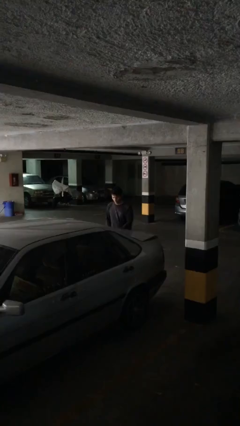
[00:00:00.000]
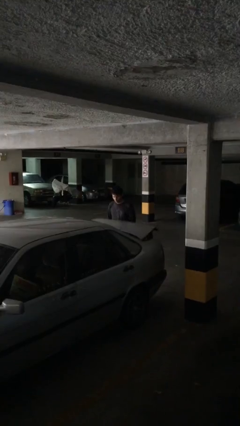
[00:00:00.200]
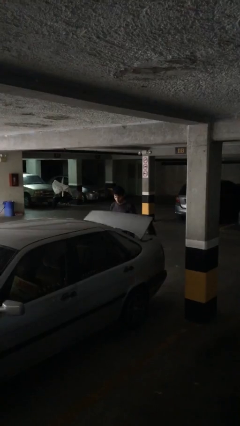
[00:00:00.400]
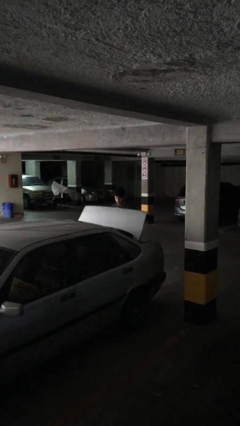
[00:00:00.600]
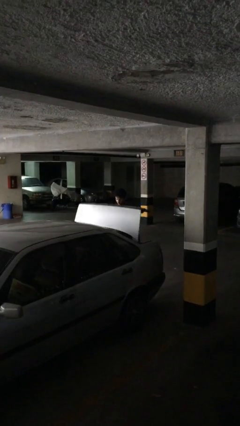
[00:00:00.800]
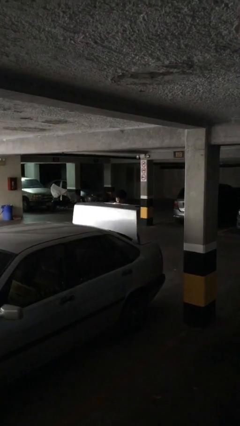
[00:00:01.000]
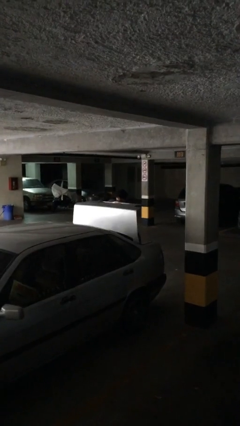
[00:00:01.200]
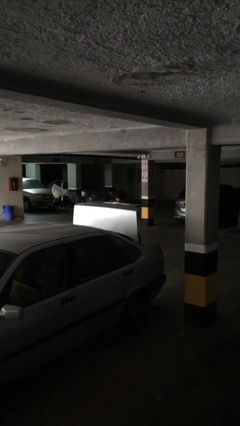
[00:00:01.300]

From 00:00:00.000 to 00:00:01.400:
person opens car trunk

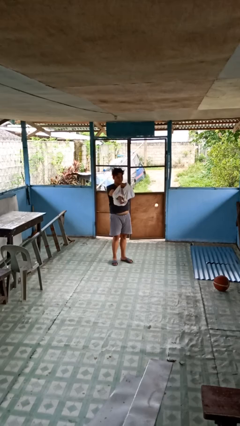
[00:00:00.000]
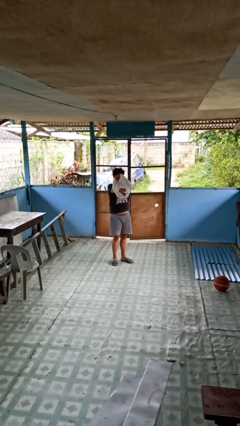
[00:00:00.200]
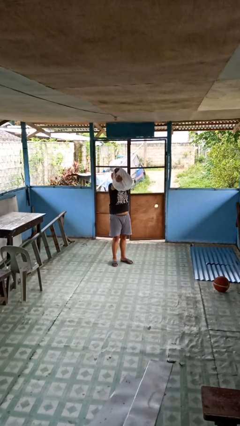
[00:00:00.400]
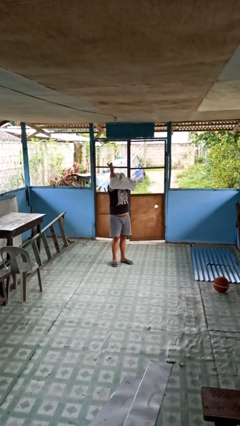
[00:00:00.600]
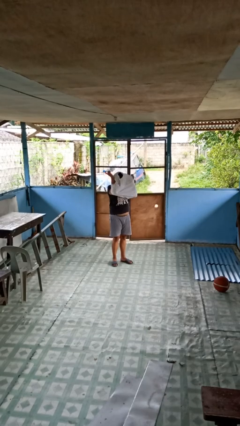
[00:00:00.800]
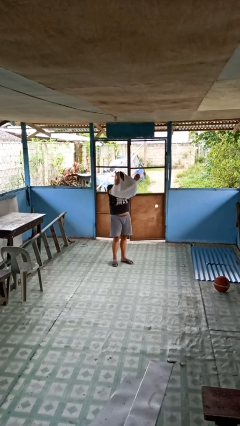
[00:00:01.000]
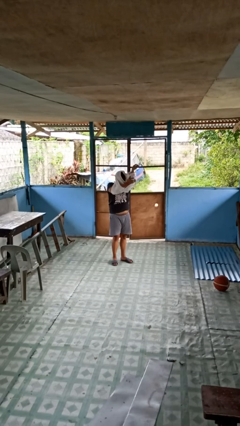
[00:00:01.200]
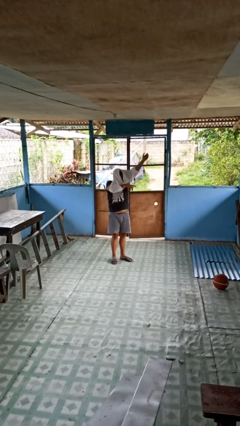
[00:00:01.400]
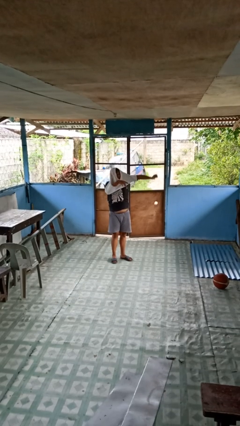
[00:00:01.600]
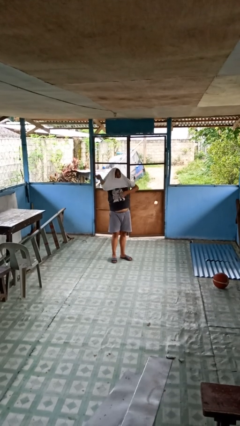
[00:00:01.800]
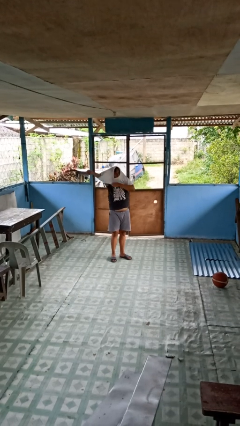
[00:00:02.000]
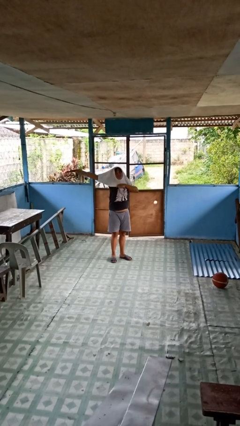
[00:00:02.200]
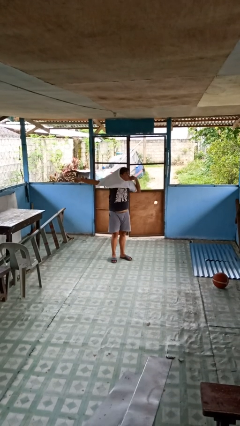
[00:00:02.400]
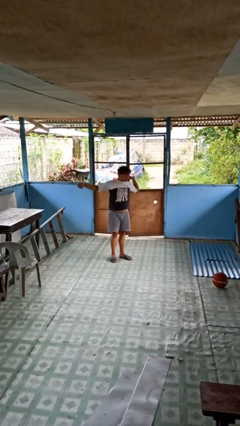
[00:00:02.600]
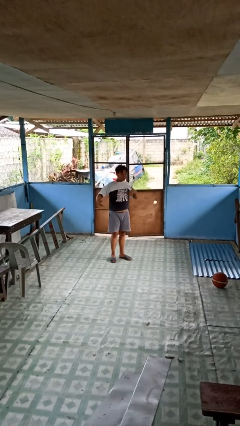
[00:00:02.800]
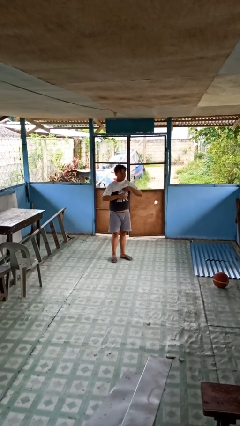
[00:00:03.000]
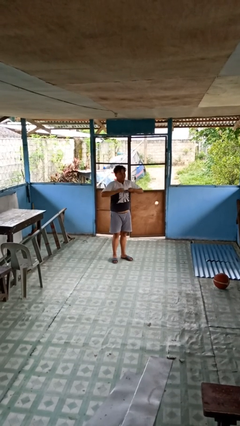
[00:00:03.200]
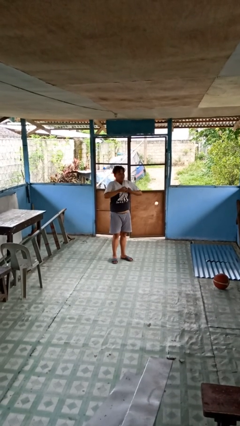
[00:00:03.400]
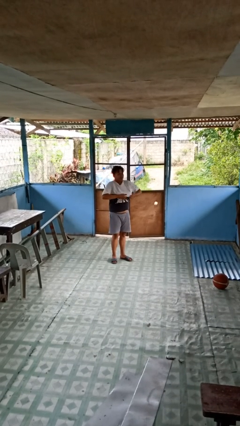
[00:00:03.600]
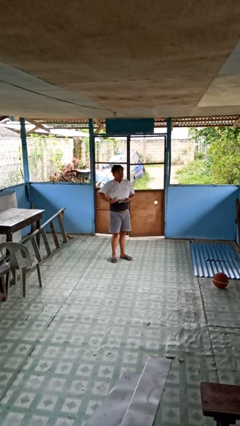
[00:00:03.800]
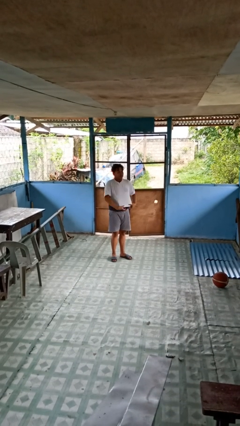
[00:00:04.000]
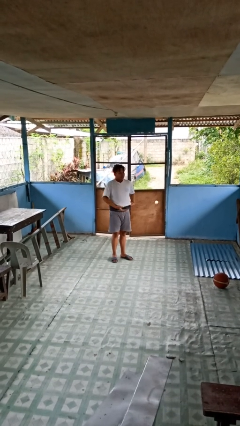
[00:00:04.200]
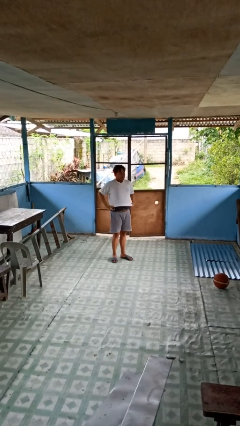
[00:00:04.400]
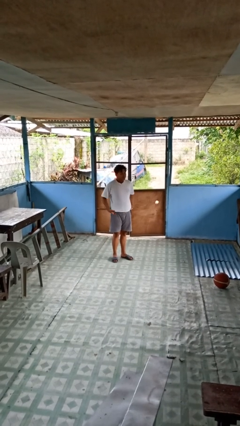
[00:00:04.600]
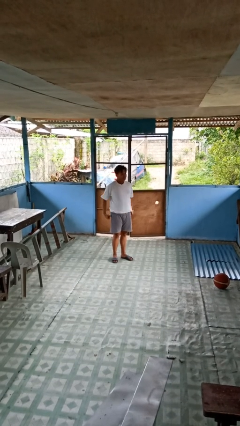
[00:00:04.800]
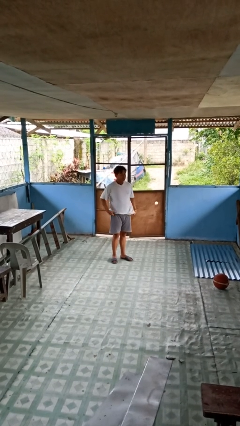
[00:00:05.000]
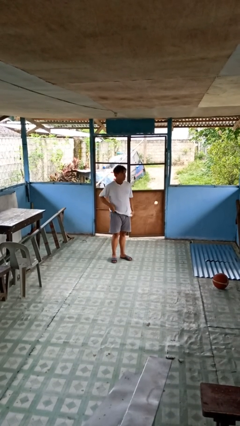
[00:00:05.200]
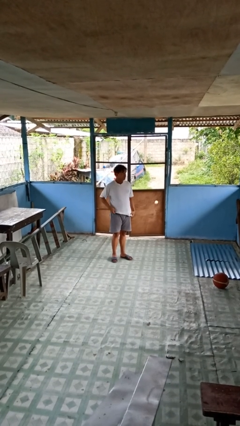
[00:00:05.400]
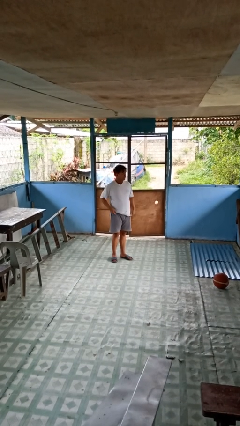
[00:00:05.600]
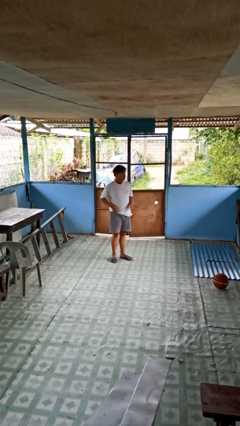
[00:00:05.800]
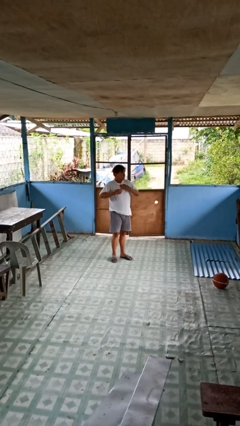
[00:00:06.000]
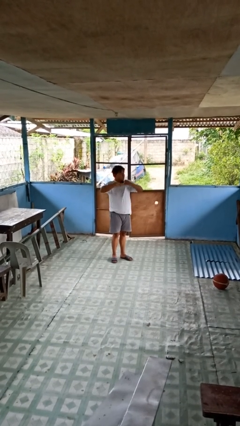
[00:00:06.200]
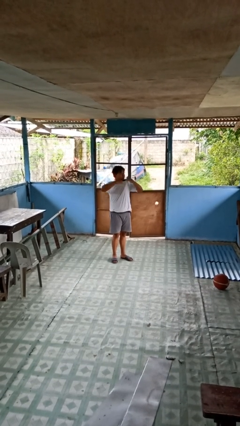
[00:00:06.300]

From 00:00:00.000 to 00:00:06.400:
person puts on shirt

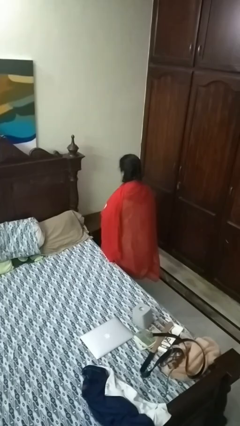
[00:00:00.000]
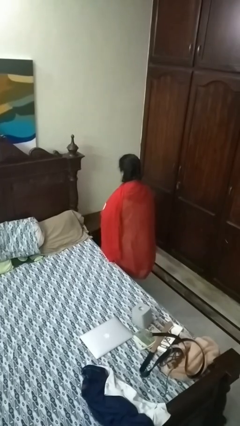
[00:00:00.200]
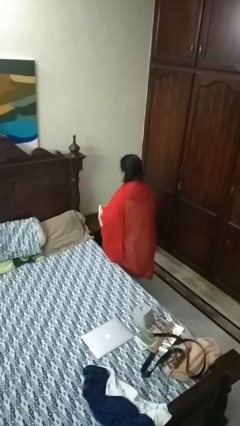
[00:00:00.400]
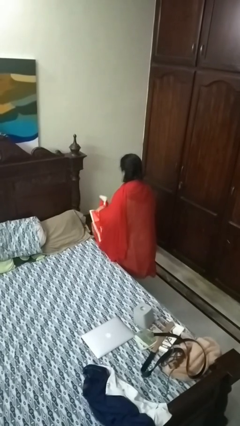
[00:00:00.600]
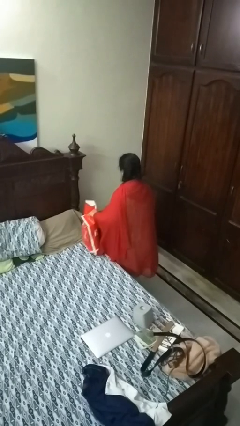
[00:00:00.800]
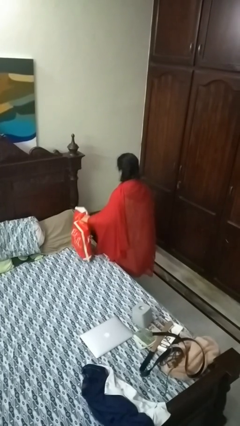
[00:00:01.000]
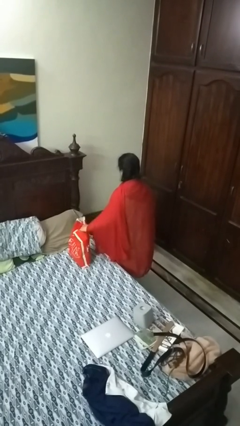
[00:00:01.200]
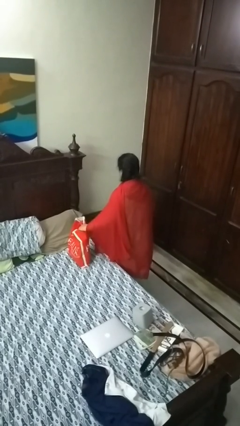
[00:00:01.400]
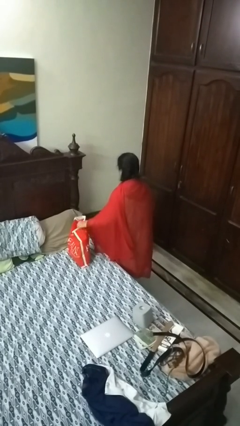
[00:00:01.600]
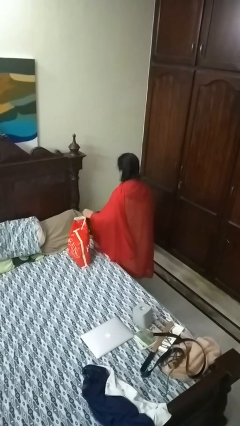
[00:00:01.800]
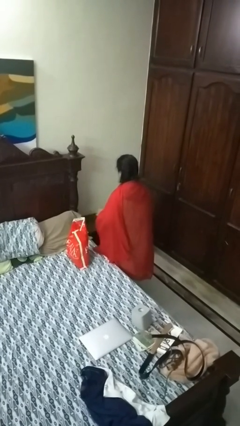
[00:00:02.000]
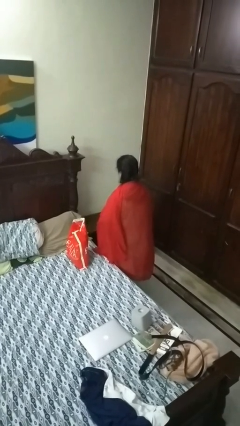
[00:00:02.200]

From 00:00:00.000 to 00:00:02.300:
person puts down object on bed

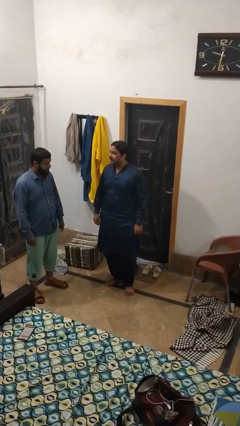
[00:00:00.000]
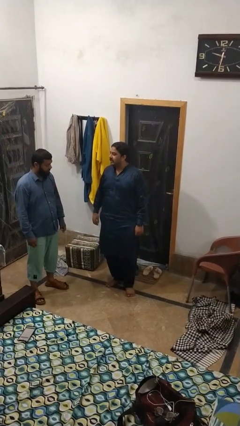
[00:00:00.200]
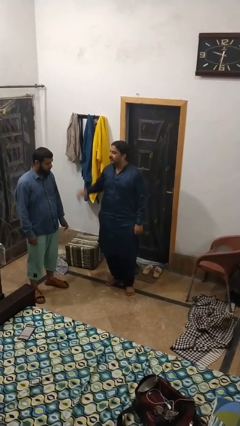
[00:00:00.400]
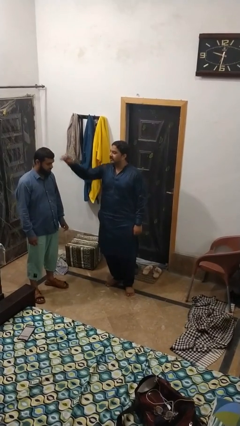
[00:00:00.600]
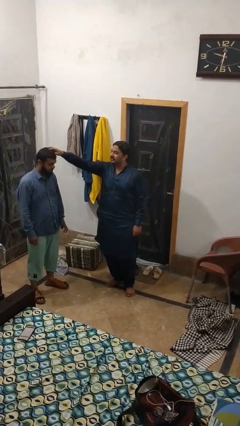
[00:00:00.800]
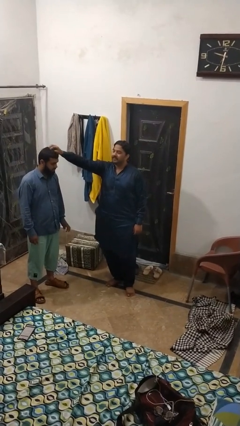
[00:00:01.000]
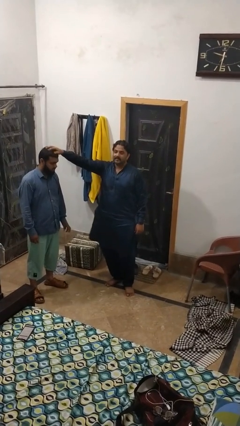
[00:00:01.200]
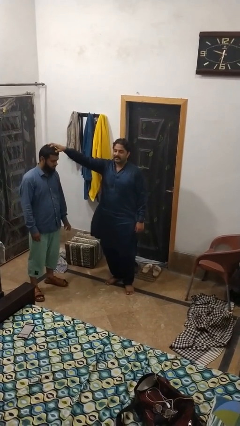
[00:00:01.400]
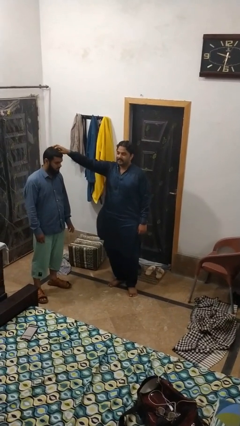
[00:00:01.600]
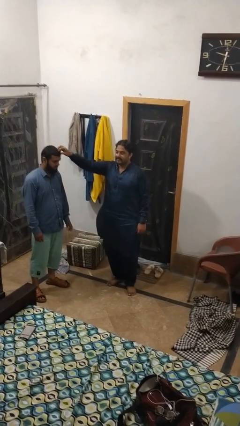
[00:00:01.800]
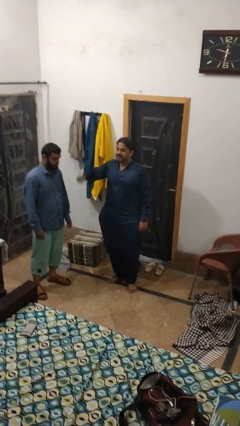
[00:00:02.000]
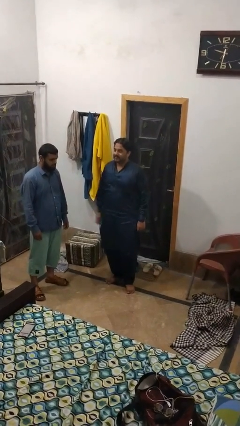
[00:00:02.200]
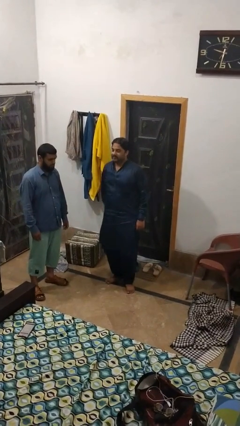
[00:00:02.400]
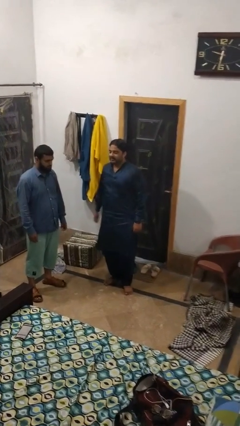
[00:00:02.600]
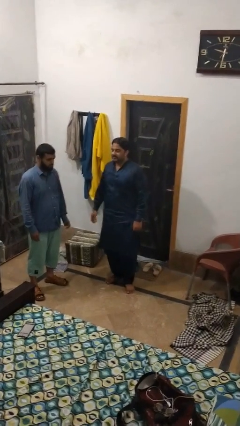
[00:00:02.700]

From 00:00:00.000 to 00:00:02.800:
person grabs person by hair

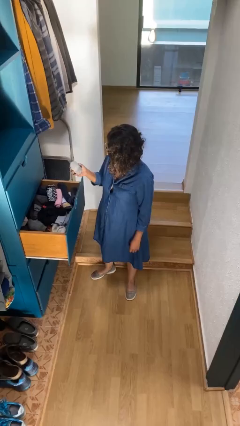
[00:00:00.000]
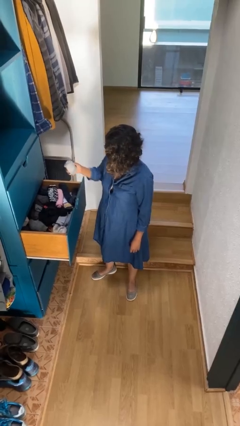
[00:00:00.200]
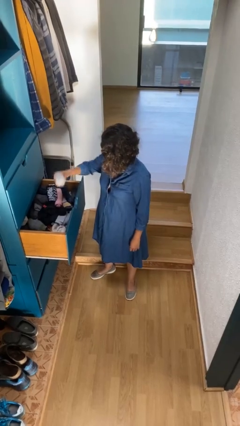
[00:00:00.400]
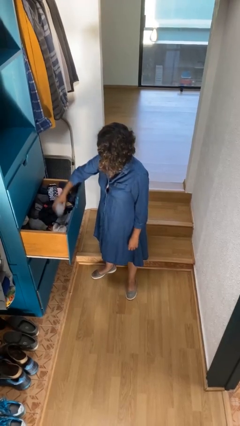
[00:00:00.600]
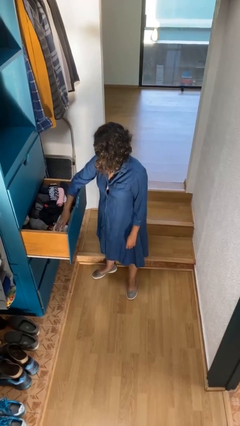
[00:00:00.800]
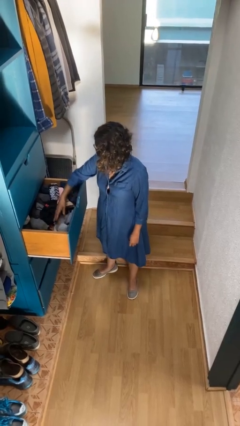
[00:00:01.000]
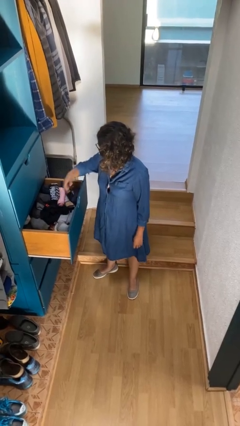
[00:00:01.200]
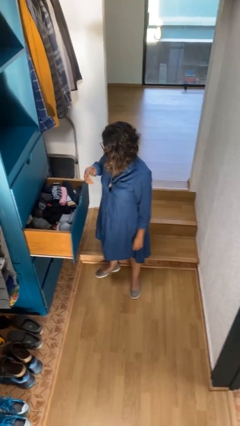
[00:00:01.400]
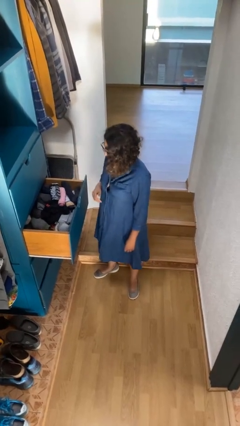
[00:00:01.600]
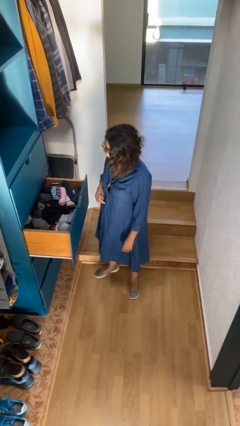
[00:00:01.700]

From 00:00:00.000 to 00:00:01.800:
person puts clothes into dresser

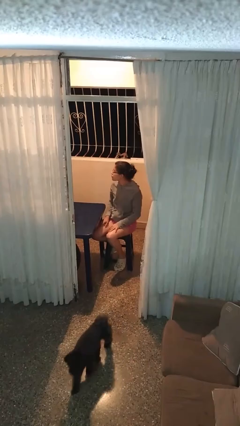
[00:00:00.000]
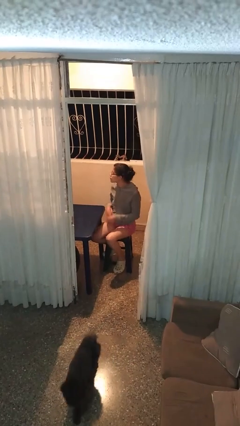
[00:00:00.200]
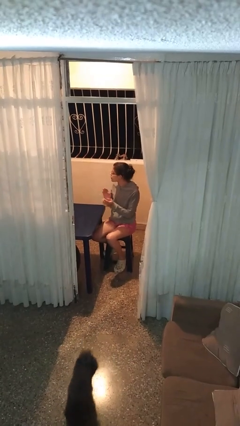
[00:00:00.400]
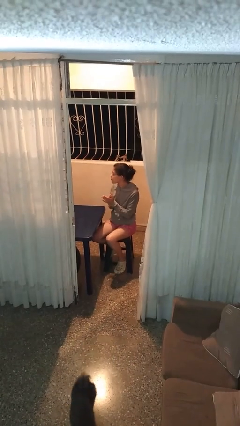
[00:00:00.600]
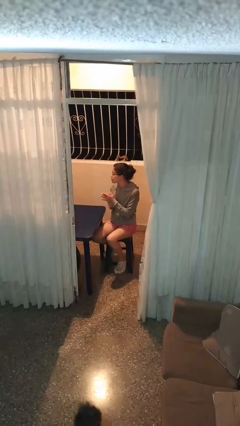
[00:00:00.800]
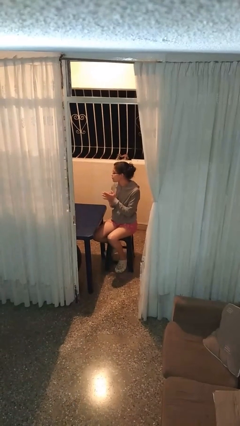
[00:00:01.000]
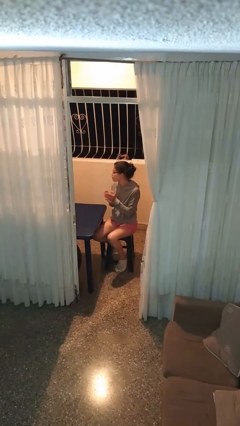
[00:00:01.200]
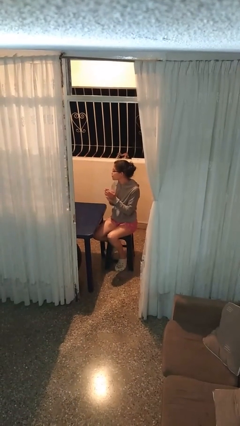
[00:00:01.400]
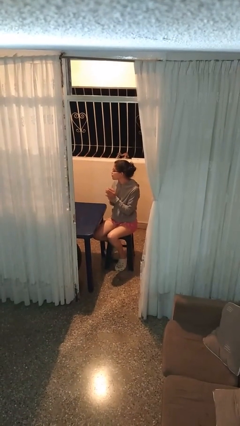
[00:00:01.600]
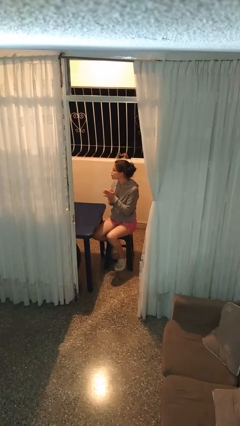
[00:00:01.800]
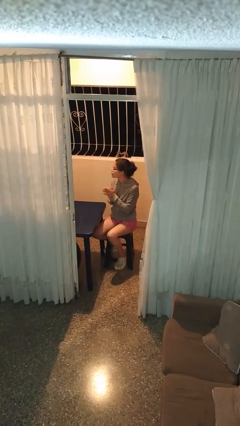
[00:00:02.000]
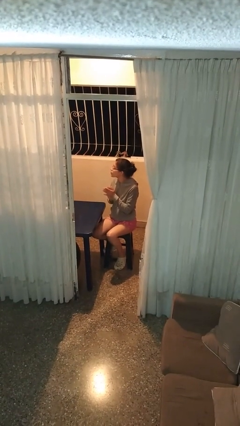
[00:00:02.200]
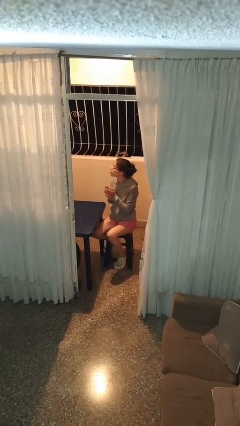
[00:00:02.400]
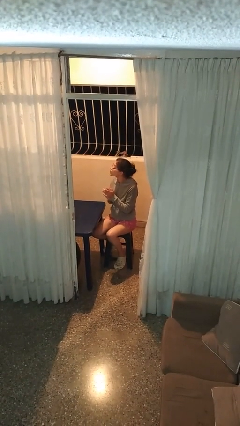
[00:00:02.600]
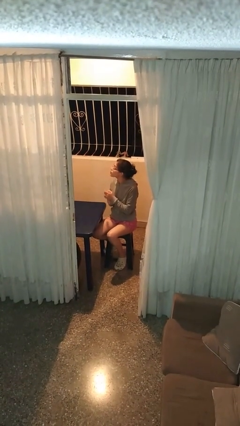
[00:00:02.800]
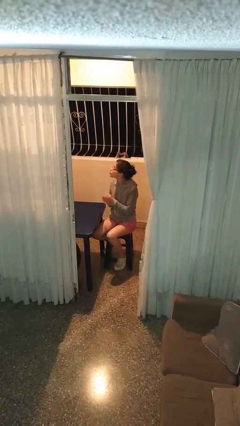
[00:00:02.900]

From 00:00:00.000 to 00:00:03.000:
person claps hands
